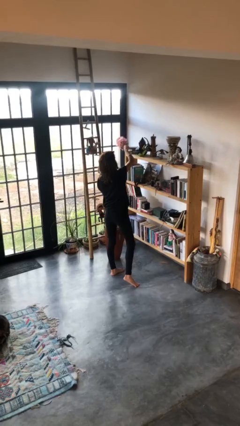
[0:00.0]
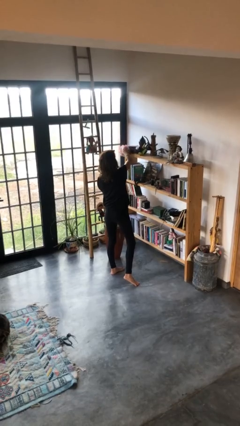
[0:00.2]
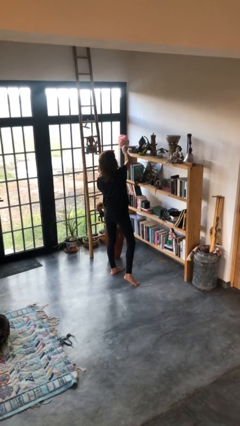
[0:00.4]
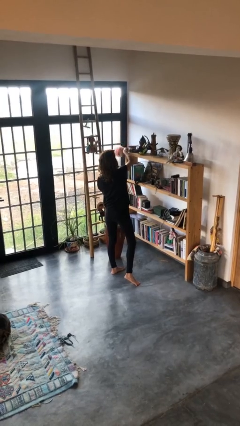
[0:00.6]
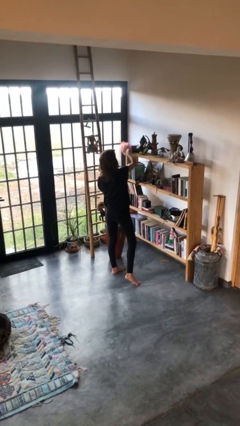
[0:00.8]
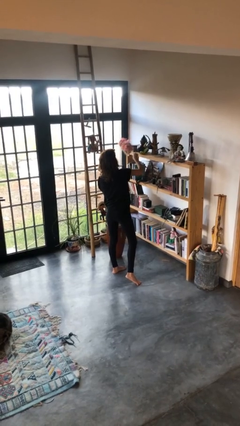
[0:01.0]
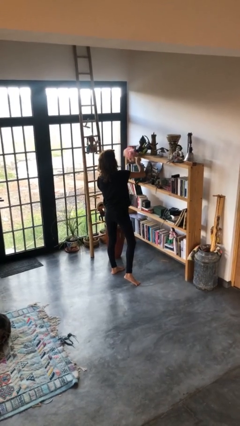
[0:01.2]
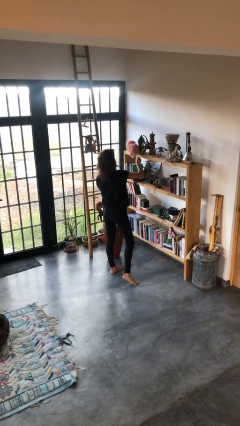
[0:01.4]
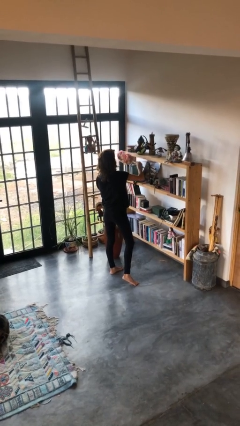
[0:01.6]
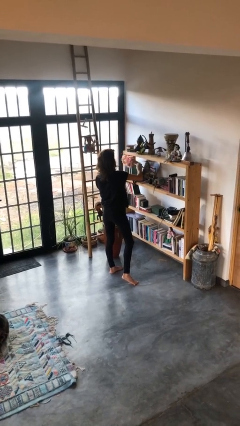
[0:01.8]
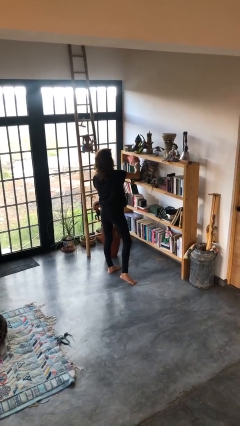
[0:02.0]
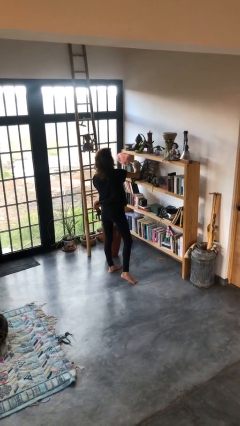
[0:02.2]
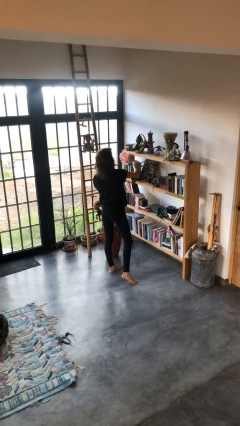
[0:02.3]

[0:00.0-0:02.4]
person dusts furniture

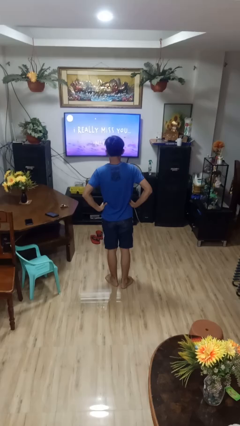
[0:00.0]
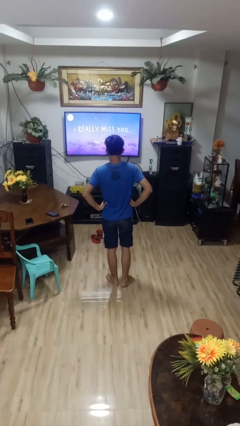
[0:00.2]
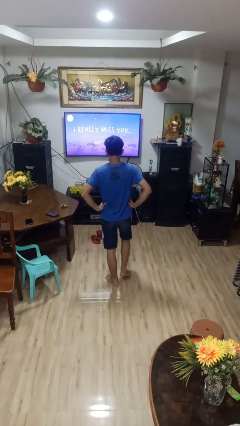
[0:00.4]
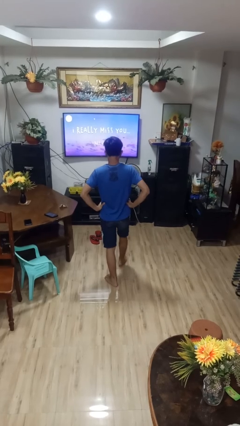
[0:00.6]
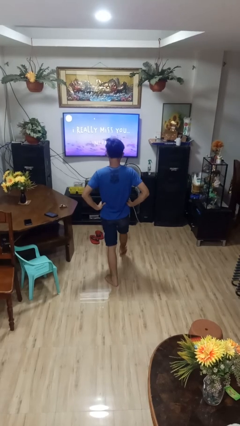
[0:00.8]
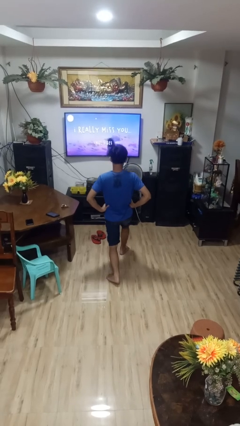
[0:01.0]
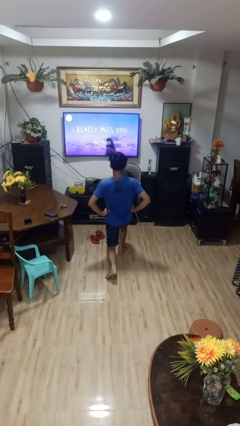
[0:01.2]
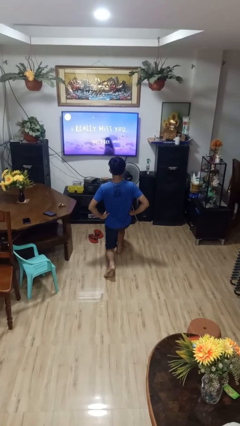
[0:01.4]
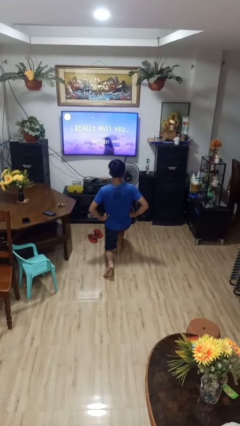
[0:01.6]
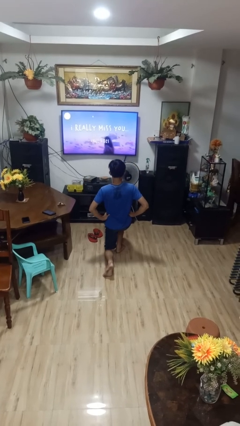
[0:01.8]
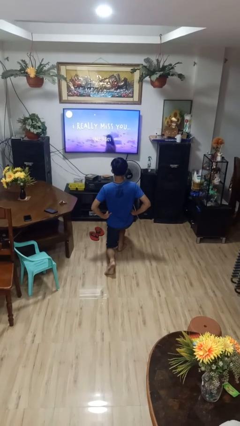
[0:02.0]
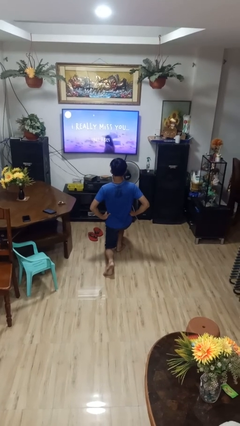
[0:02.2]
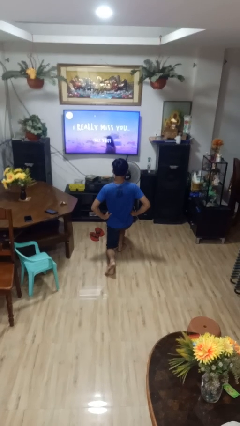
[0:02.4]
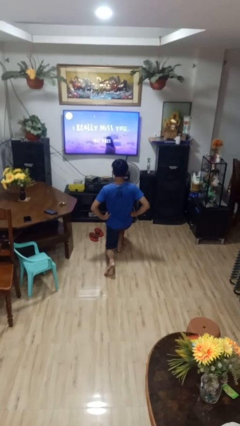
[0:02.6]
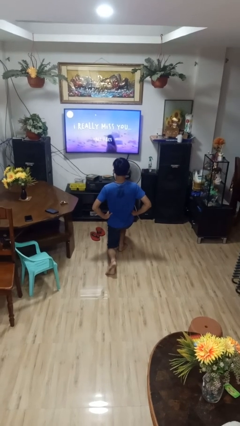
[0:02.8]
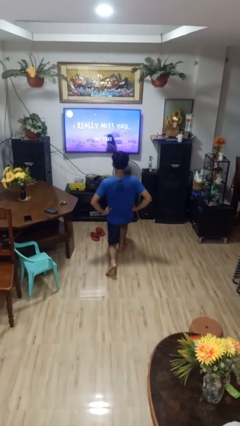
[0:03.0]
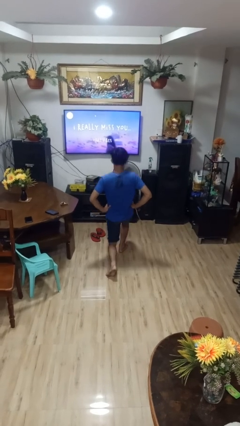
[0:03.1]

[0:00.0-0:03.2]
person exercises with lunges

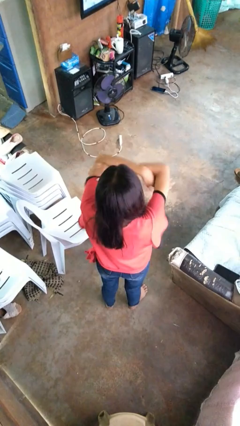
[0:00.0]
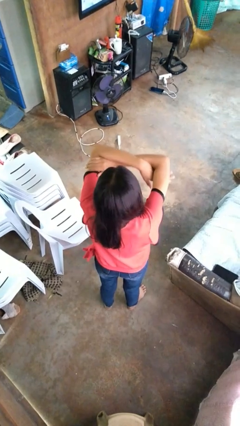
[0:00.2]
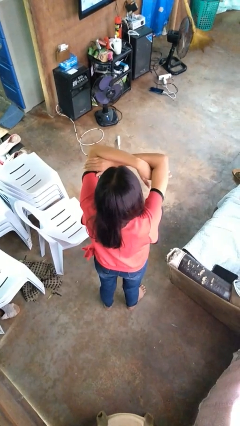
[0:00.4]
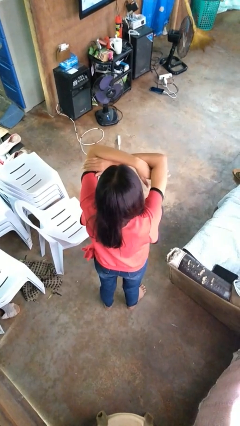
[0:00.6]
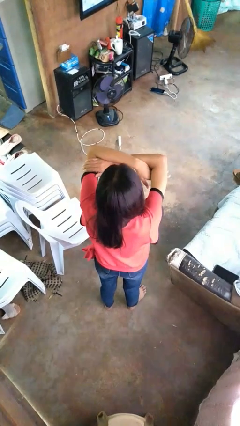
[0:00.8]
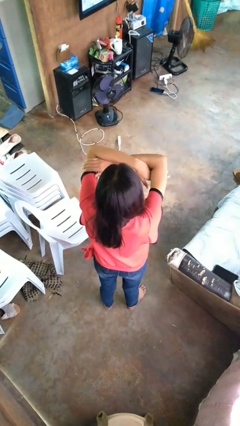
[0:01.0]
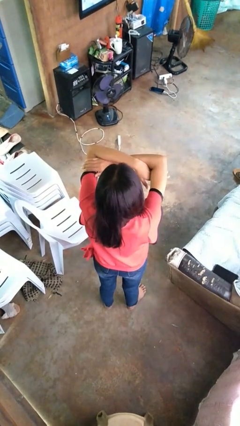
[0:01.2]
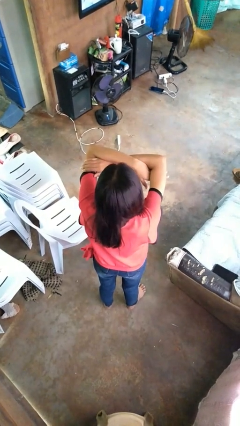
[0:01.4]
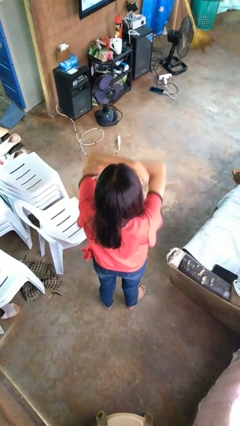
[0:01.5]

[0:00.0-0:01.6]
person gestures arms x

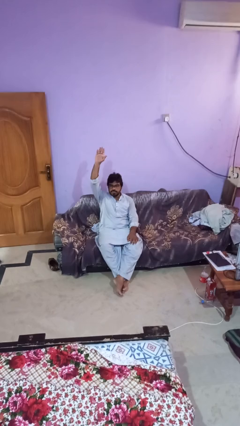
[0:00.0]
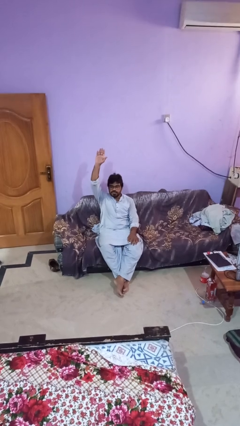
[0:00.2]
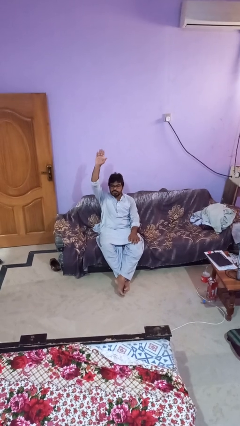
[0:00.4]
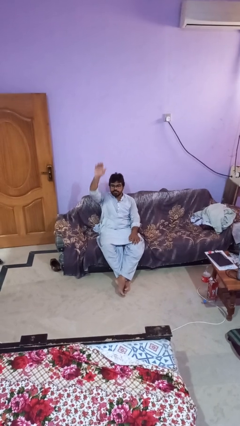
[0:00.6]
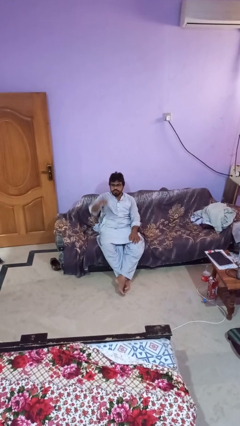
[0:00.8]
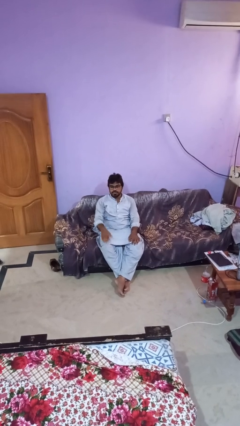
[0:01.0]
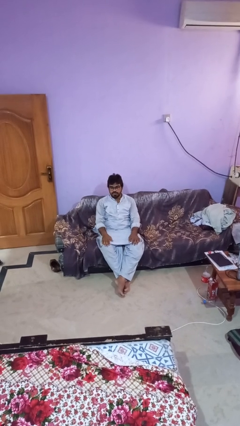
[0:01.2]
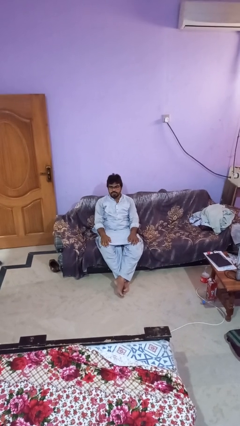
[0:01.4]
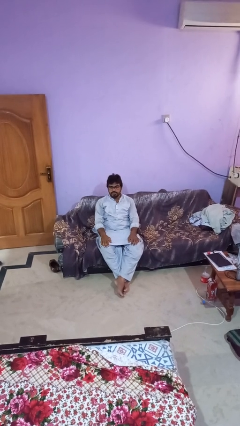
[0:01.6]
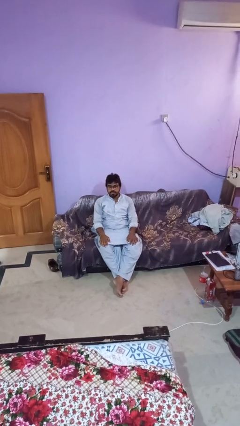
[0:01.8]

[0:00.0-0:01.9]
person gestures lower hand

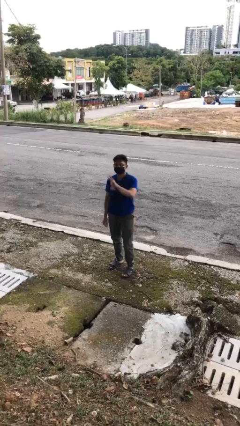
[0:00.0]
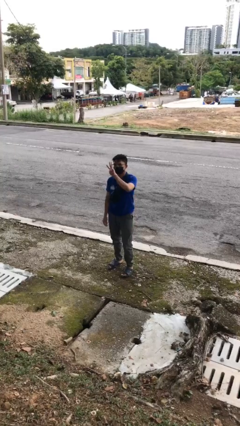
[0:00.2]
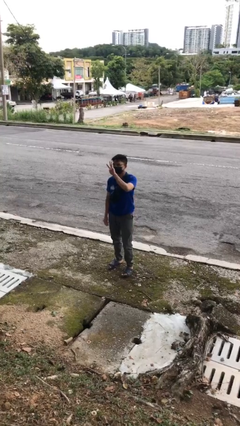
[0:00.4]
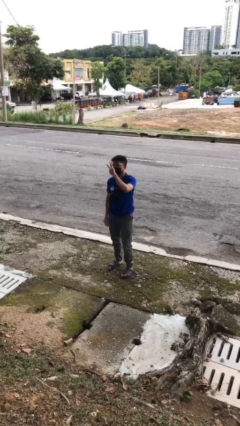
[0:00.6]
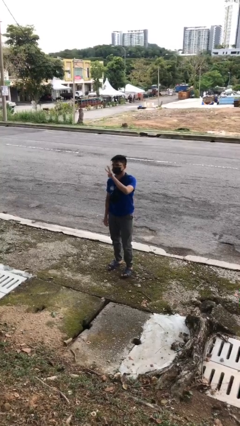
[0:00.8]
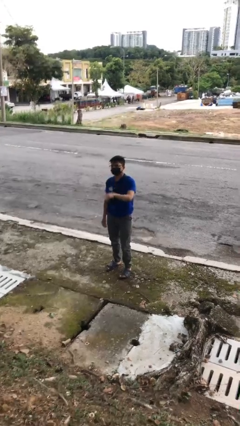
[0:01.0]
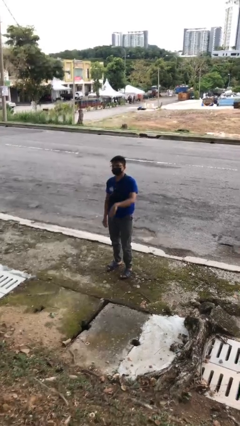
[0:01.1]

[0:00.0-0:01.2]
person gestures number three

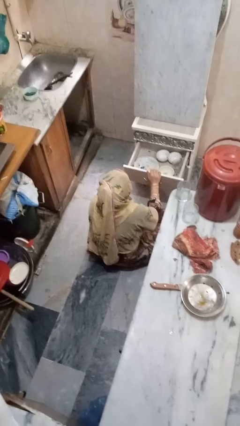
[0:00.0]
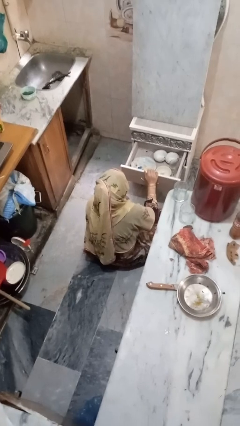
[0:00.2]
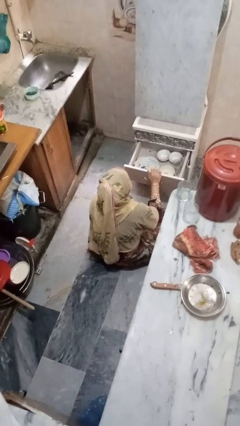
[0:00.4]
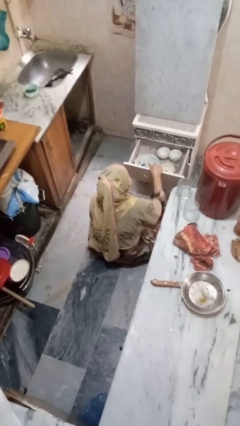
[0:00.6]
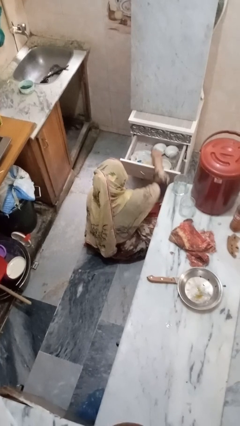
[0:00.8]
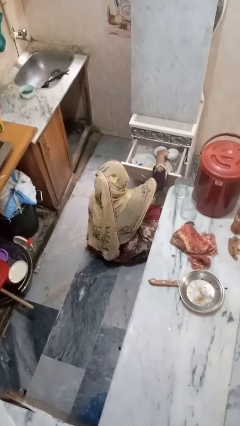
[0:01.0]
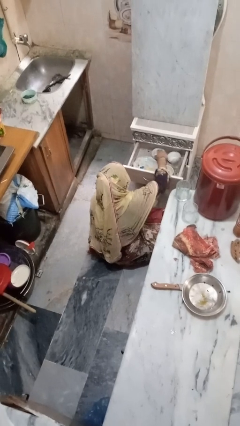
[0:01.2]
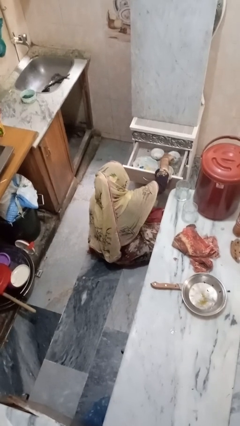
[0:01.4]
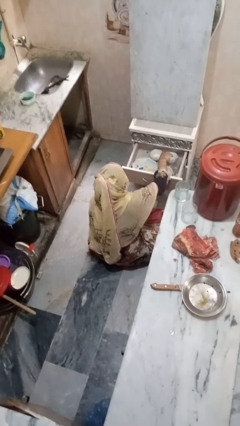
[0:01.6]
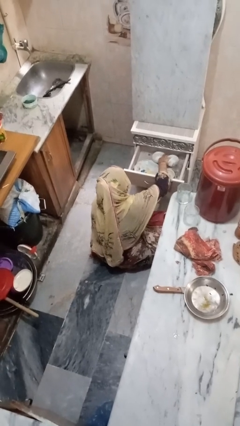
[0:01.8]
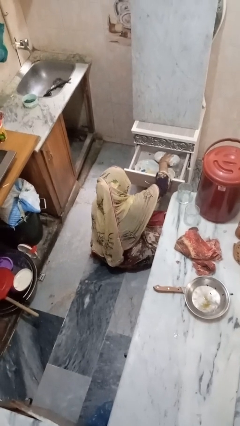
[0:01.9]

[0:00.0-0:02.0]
person searches in kitchen drawer

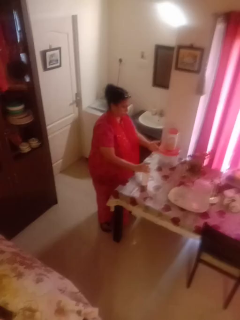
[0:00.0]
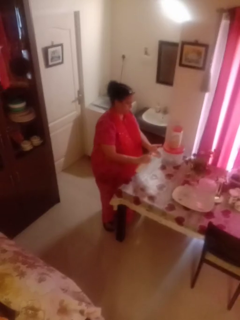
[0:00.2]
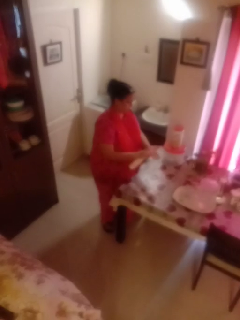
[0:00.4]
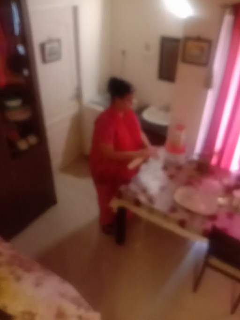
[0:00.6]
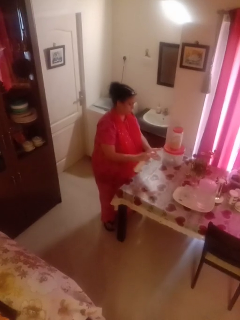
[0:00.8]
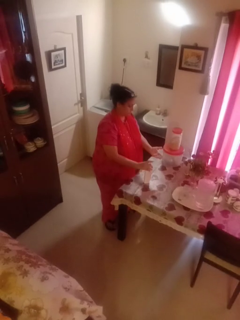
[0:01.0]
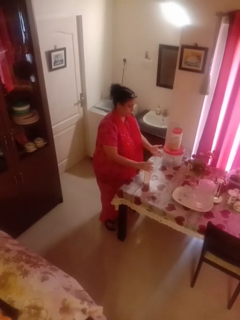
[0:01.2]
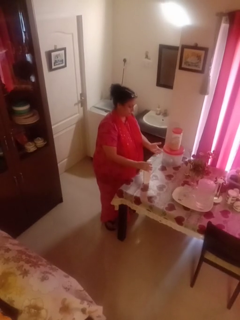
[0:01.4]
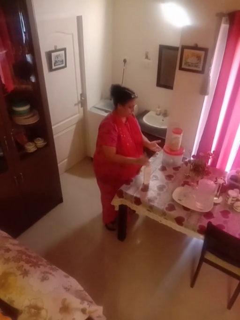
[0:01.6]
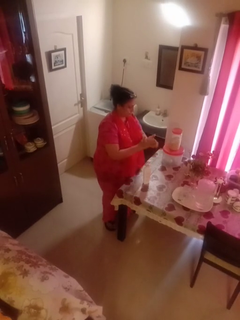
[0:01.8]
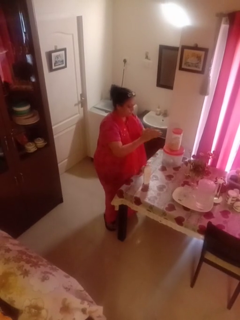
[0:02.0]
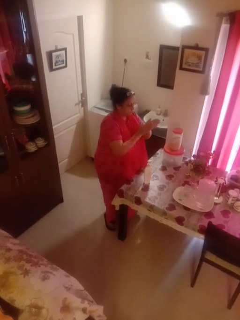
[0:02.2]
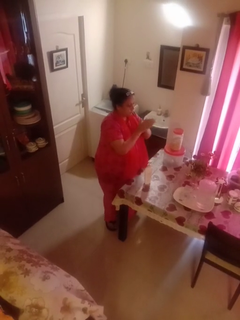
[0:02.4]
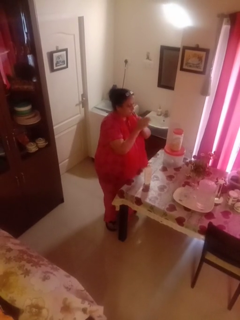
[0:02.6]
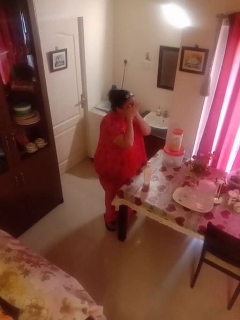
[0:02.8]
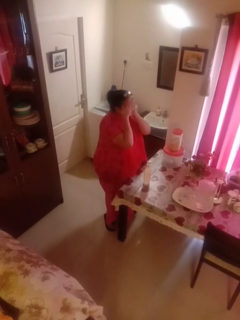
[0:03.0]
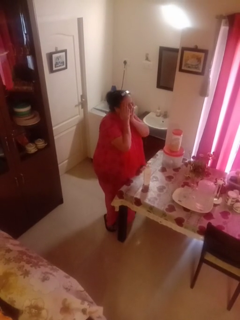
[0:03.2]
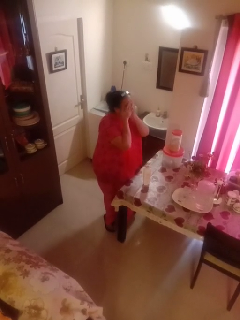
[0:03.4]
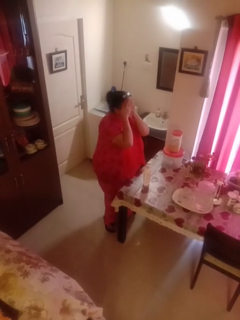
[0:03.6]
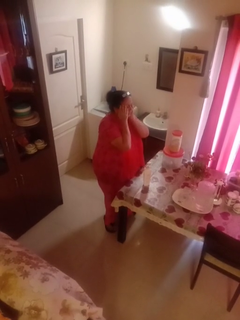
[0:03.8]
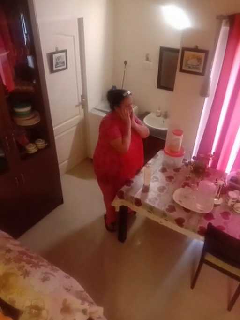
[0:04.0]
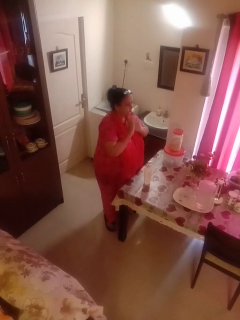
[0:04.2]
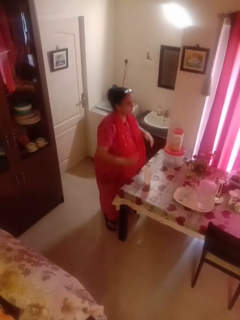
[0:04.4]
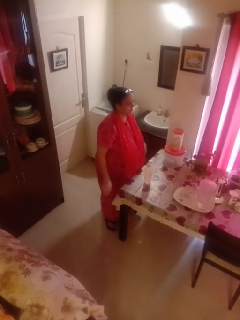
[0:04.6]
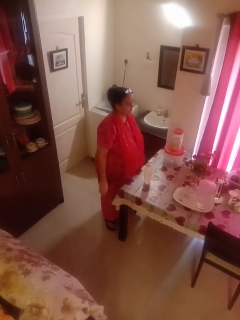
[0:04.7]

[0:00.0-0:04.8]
person applies sunscreen

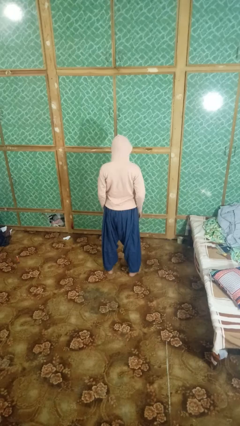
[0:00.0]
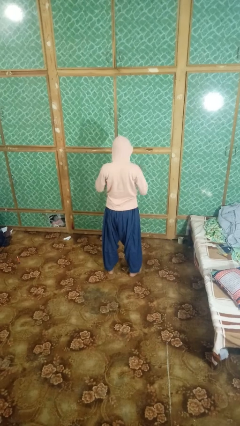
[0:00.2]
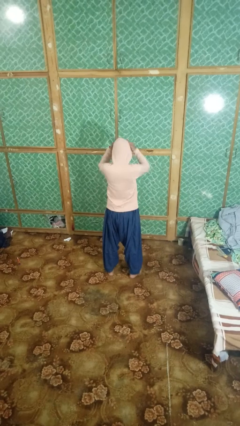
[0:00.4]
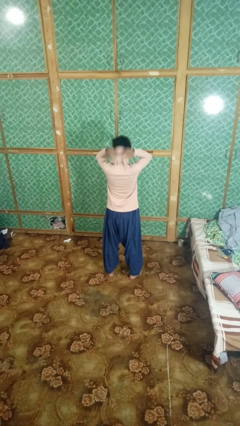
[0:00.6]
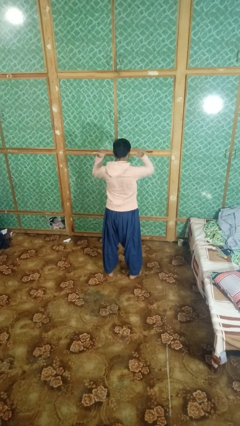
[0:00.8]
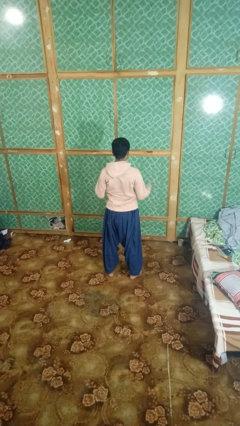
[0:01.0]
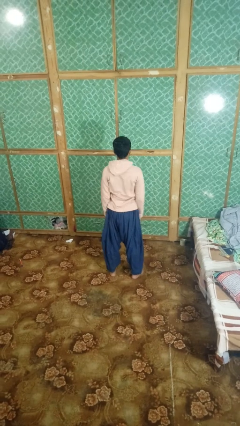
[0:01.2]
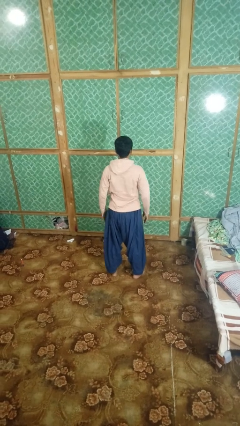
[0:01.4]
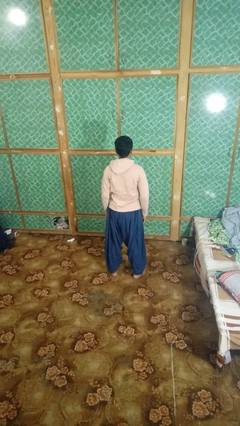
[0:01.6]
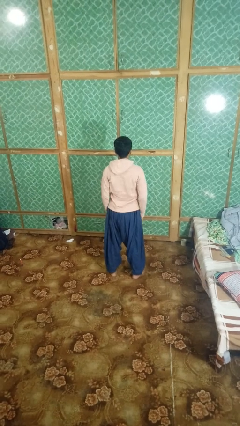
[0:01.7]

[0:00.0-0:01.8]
person takes off hoodie
